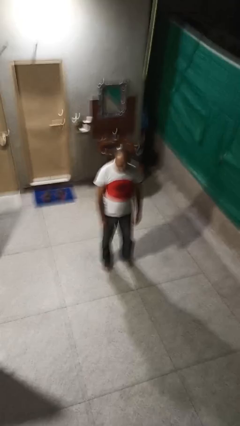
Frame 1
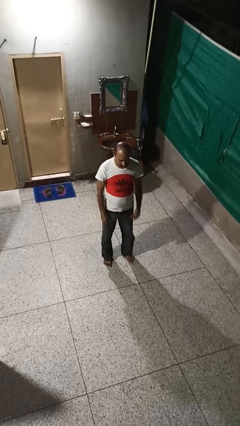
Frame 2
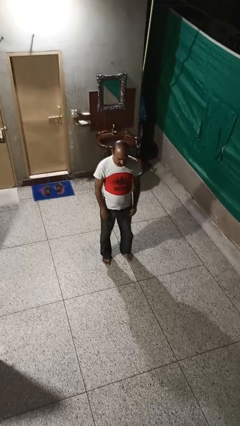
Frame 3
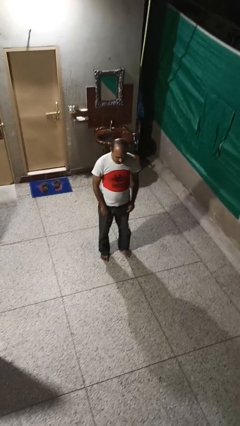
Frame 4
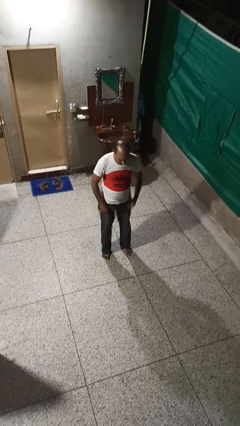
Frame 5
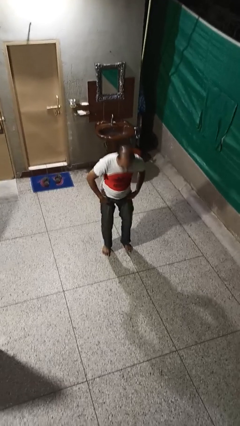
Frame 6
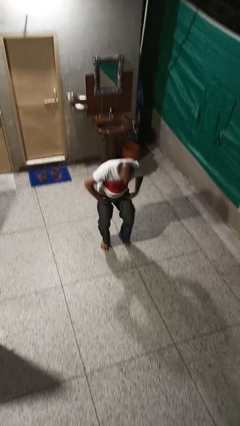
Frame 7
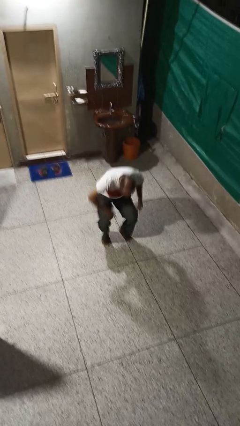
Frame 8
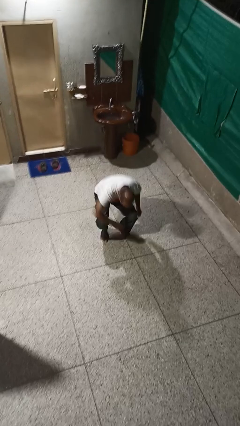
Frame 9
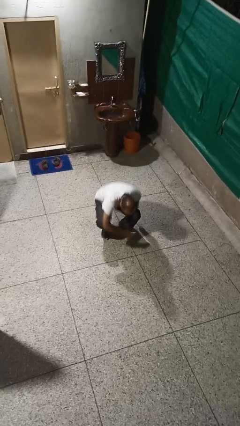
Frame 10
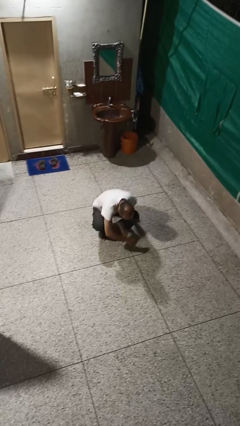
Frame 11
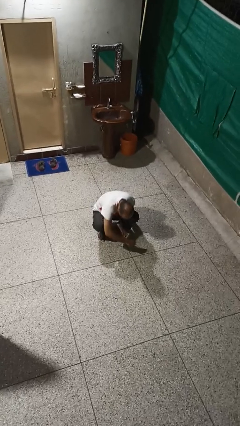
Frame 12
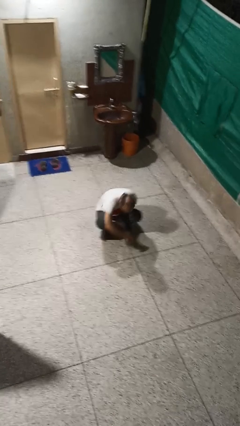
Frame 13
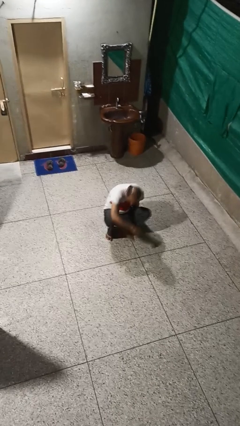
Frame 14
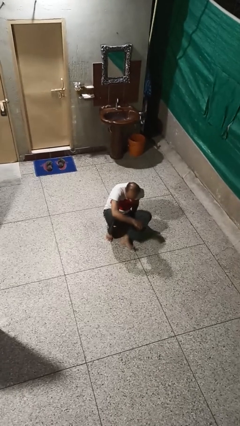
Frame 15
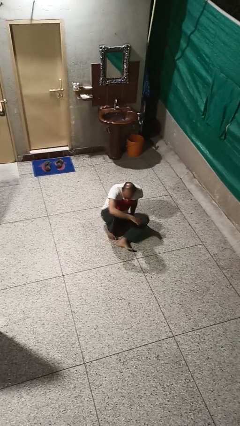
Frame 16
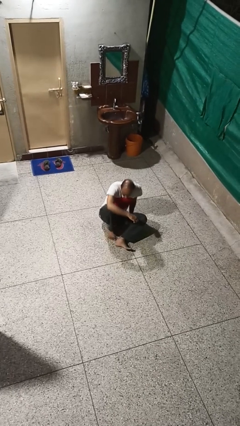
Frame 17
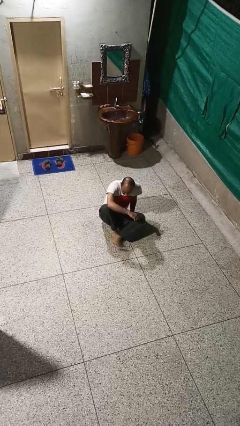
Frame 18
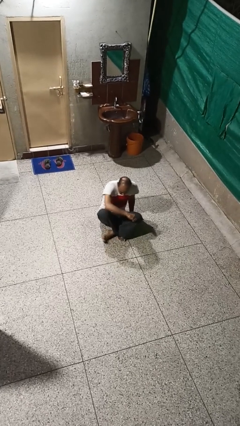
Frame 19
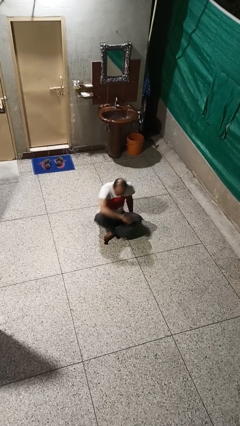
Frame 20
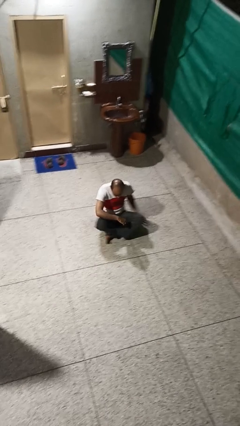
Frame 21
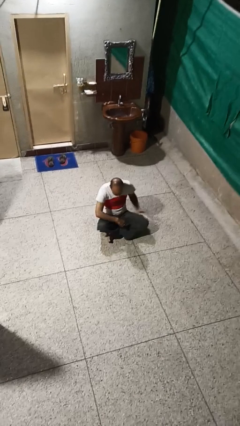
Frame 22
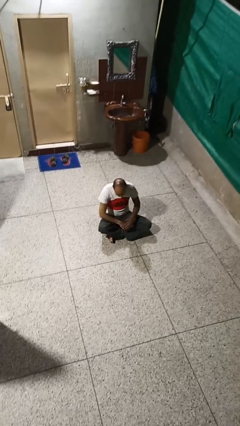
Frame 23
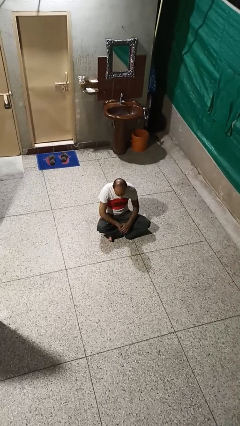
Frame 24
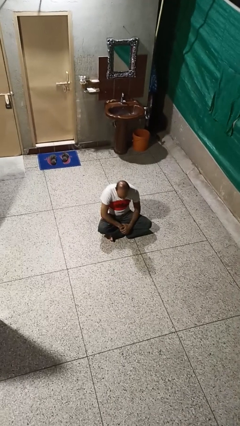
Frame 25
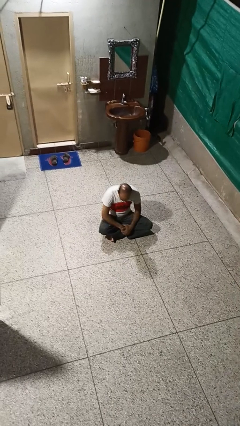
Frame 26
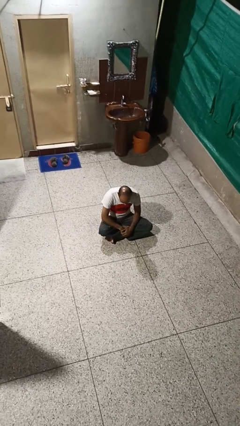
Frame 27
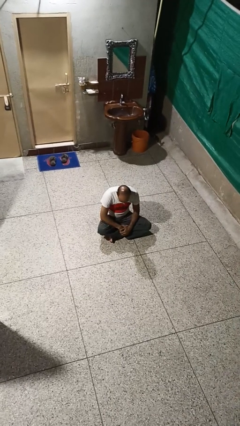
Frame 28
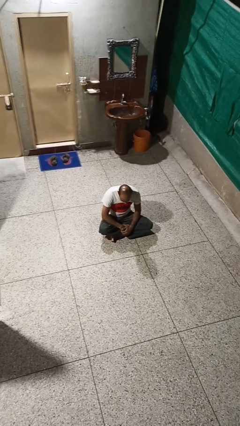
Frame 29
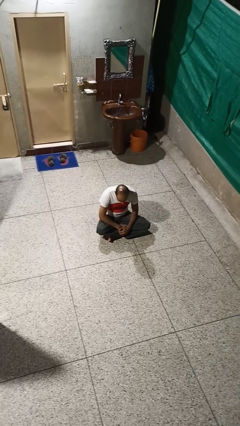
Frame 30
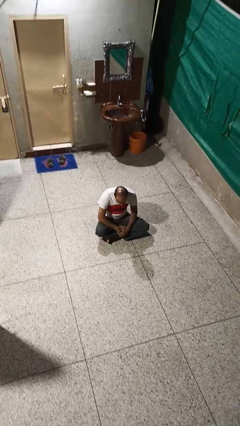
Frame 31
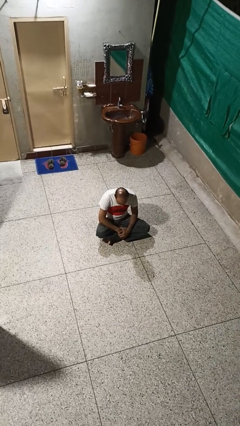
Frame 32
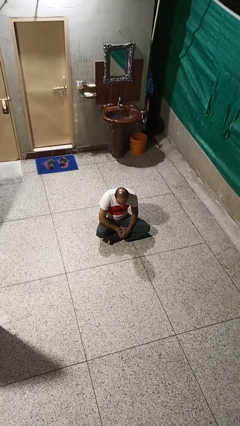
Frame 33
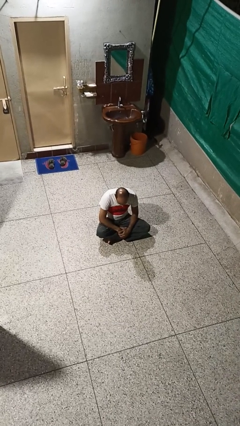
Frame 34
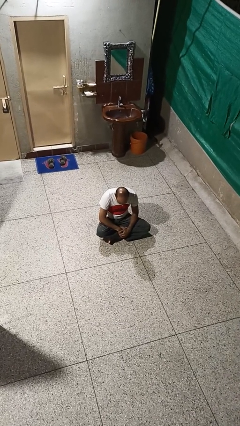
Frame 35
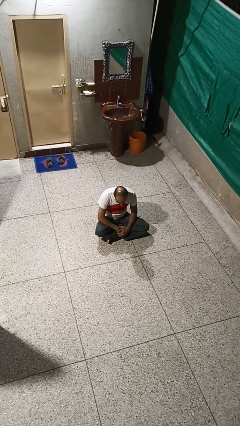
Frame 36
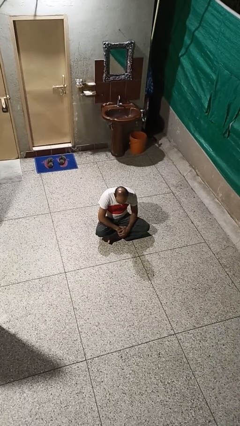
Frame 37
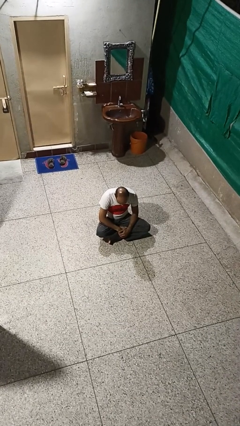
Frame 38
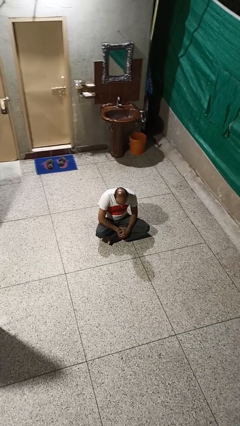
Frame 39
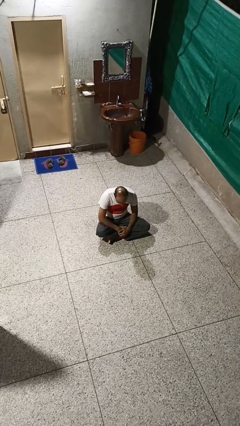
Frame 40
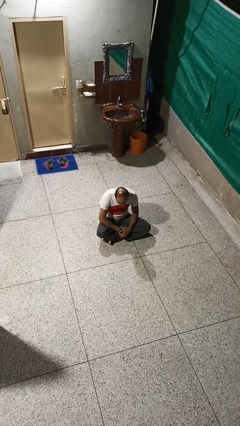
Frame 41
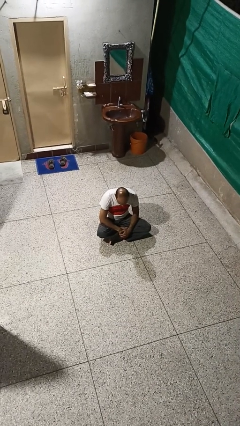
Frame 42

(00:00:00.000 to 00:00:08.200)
person sits crisscross

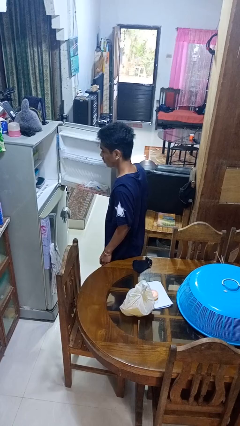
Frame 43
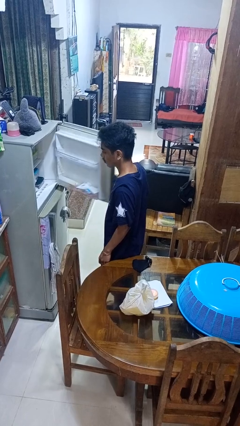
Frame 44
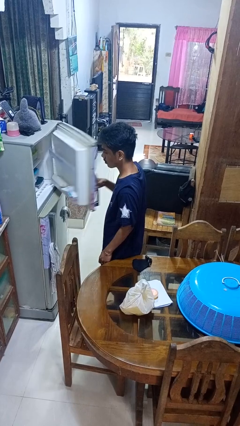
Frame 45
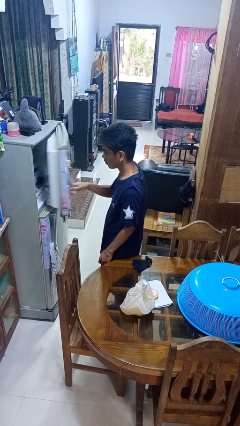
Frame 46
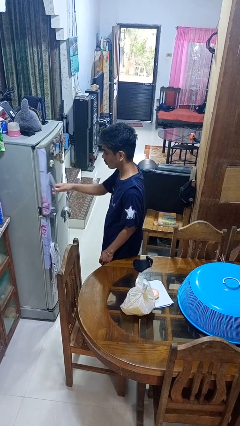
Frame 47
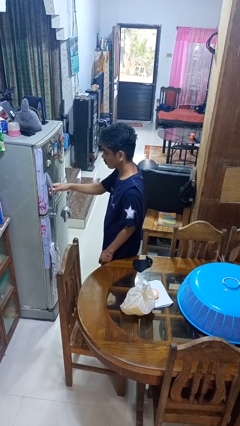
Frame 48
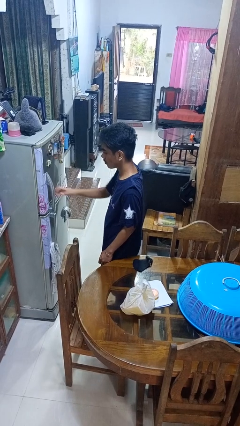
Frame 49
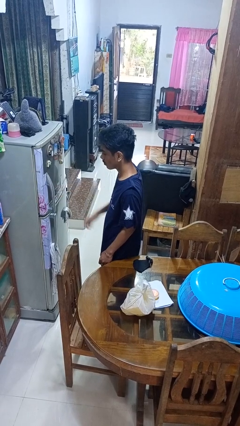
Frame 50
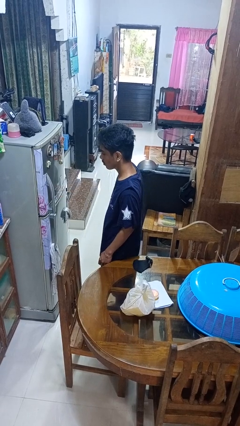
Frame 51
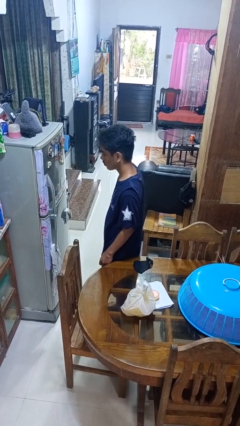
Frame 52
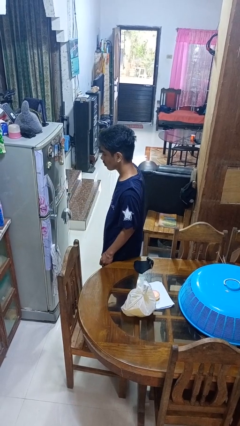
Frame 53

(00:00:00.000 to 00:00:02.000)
person closes refrigerator

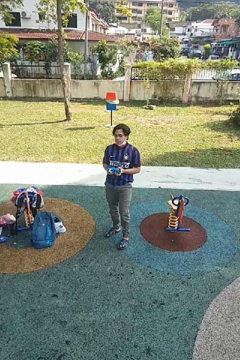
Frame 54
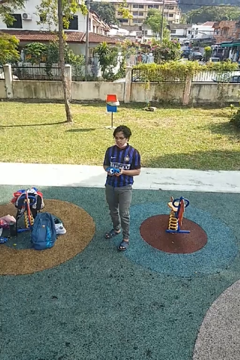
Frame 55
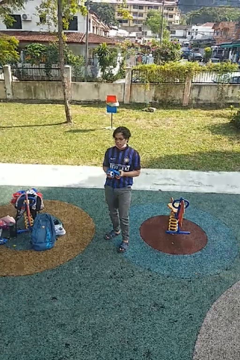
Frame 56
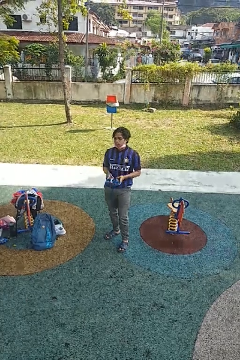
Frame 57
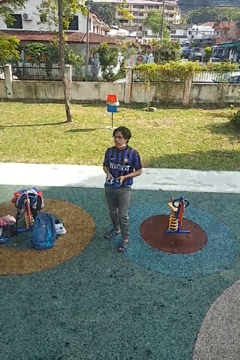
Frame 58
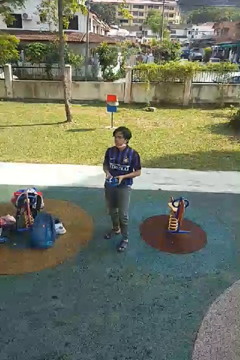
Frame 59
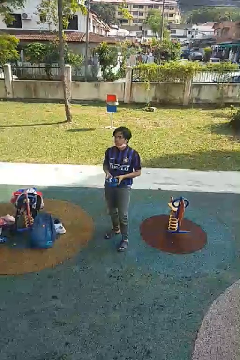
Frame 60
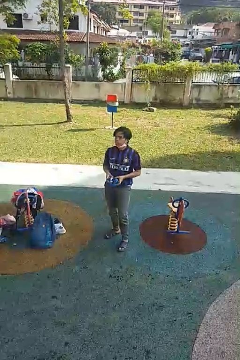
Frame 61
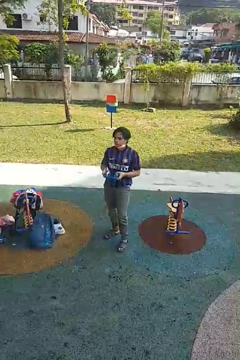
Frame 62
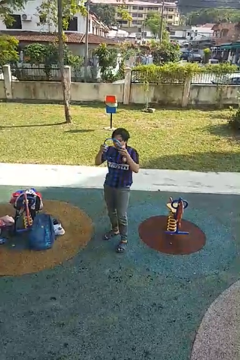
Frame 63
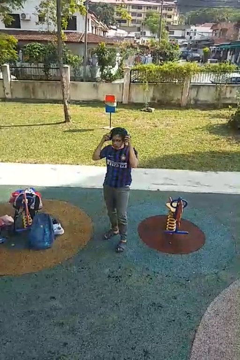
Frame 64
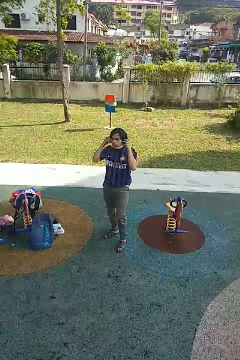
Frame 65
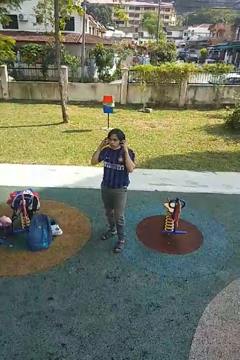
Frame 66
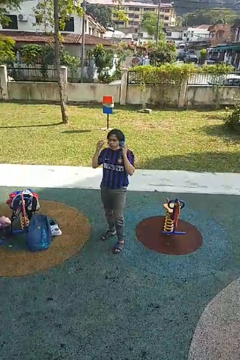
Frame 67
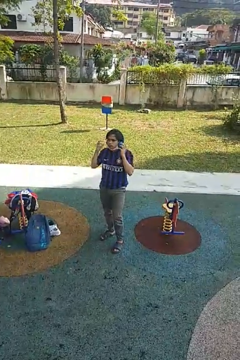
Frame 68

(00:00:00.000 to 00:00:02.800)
person puts on headphones

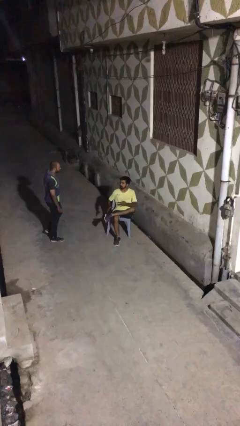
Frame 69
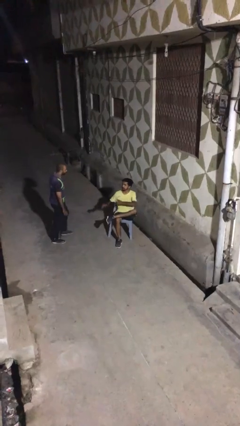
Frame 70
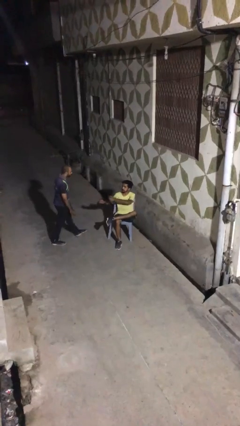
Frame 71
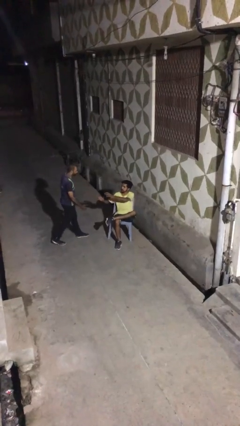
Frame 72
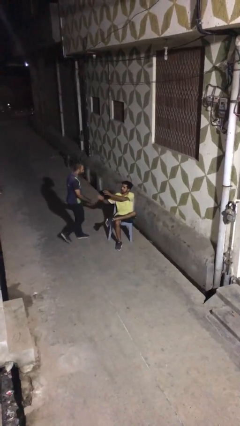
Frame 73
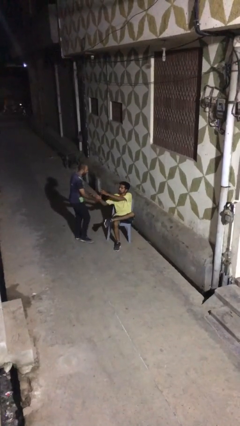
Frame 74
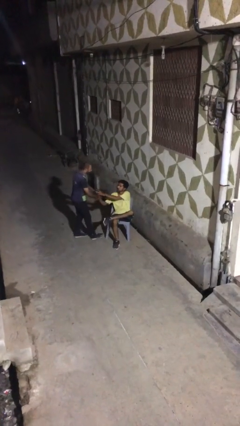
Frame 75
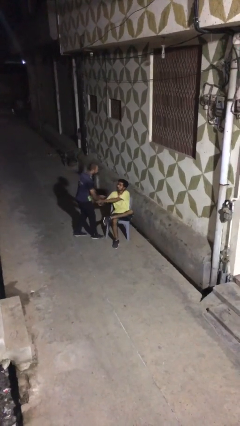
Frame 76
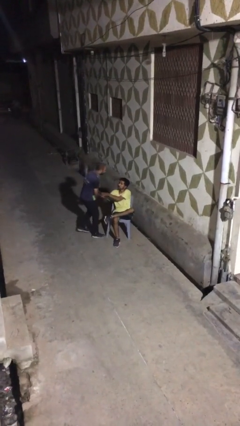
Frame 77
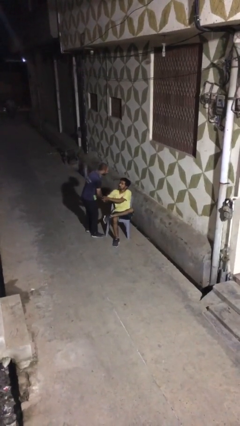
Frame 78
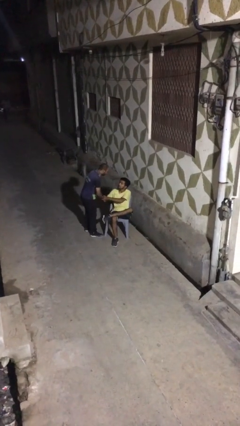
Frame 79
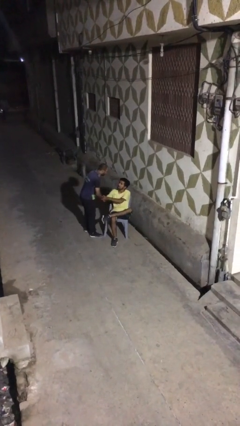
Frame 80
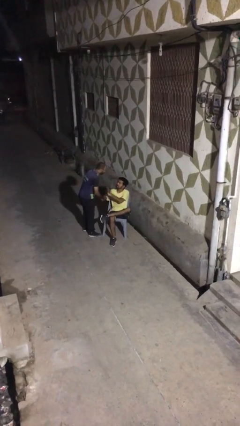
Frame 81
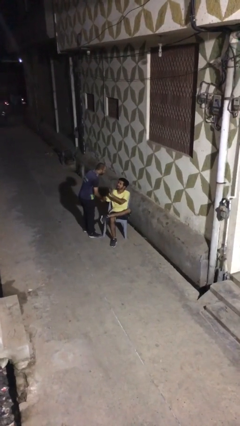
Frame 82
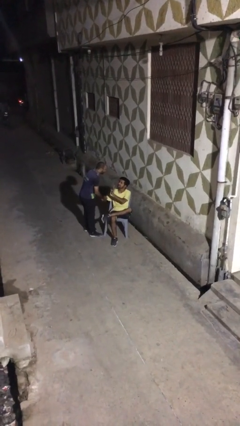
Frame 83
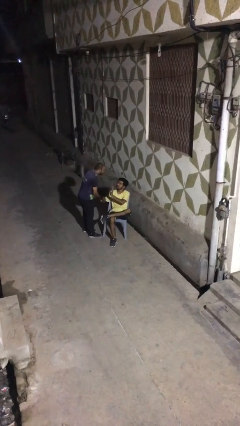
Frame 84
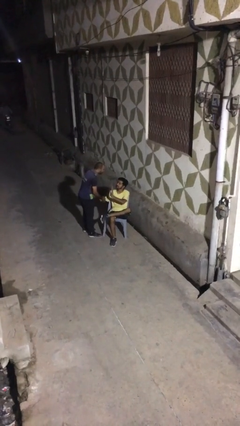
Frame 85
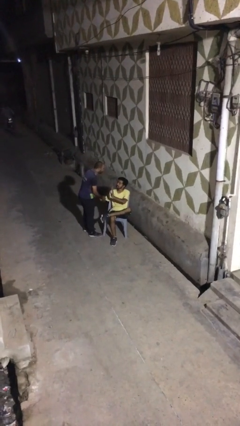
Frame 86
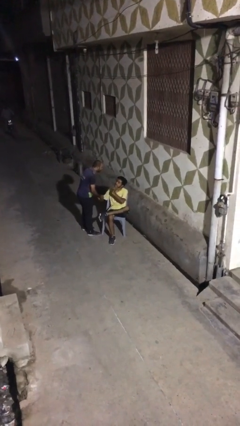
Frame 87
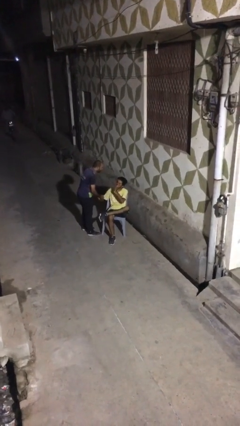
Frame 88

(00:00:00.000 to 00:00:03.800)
person shakes hand

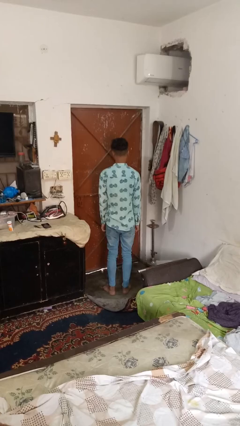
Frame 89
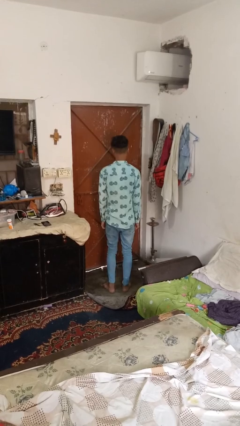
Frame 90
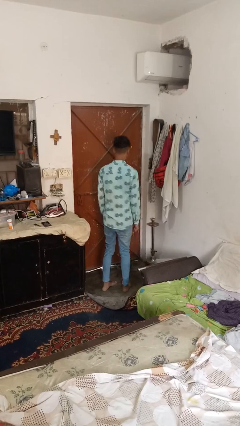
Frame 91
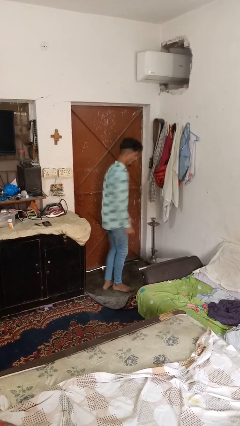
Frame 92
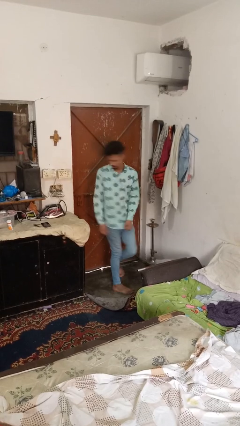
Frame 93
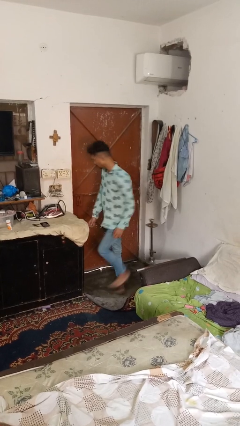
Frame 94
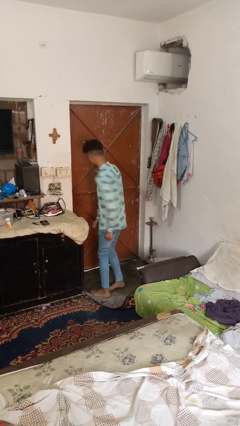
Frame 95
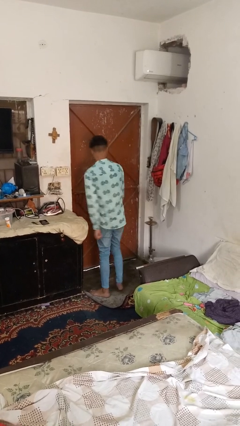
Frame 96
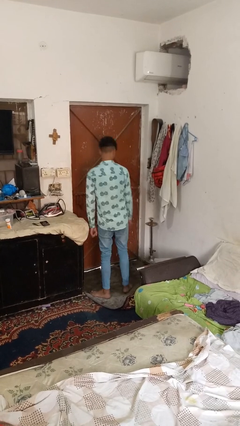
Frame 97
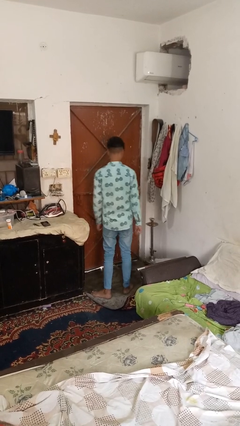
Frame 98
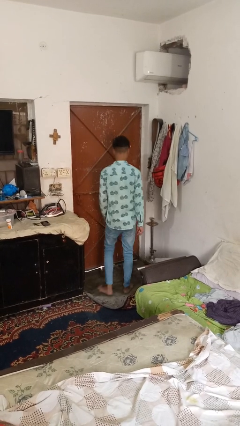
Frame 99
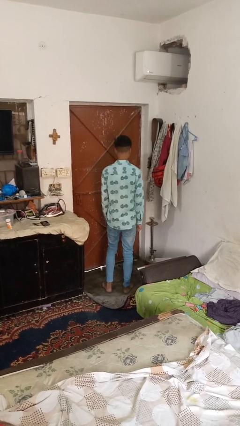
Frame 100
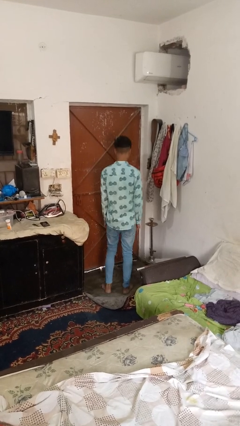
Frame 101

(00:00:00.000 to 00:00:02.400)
person twirls
